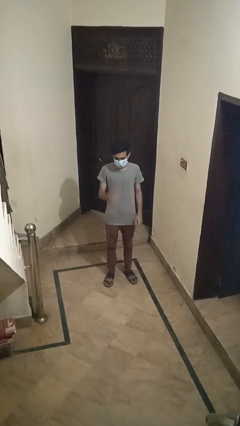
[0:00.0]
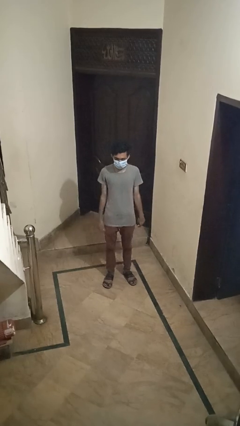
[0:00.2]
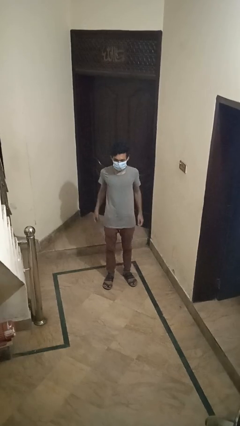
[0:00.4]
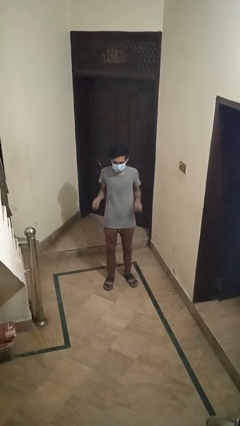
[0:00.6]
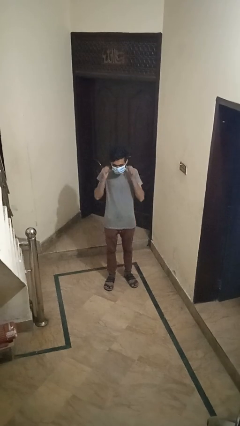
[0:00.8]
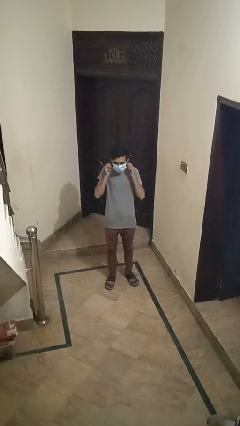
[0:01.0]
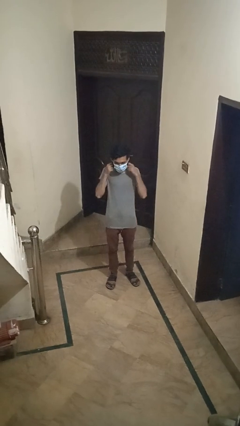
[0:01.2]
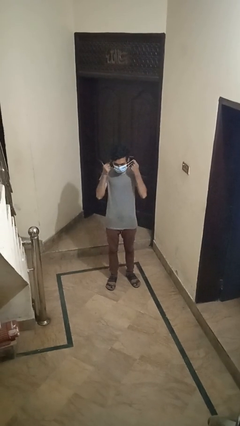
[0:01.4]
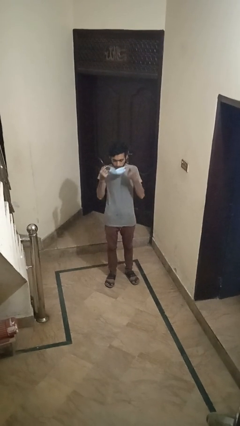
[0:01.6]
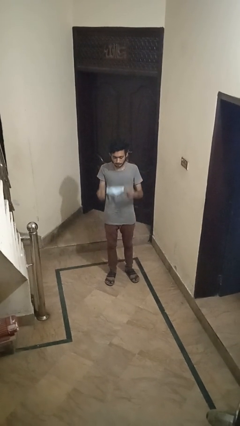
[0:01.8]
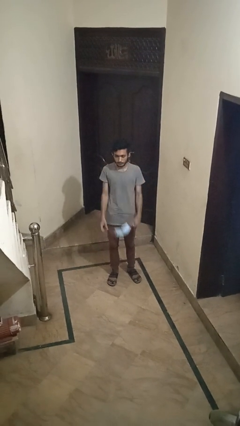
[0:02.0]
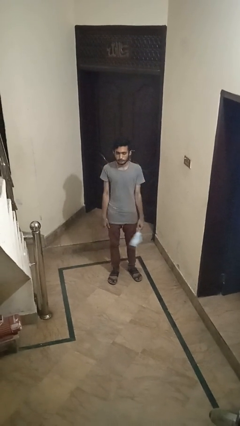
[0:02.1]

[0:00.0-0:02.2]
person takes off facemask

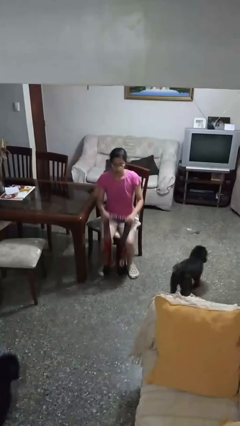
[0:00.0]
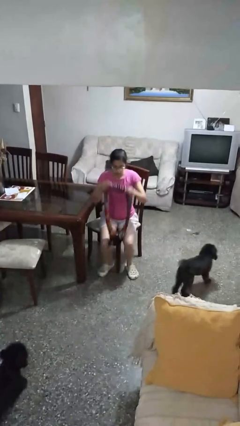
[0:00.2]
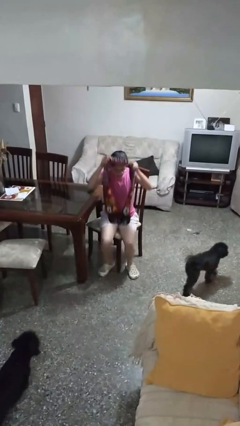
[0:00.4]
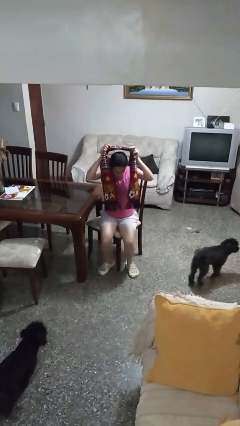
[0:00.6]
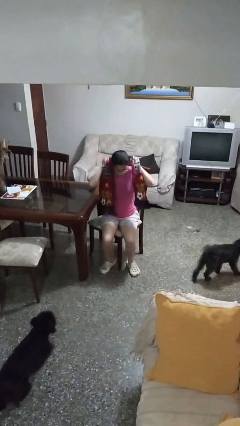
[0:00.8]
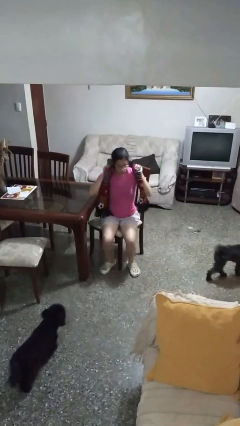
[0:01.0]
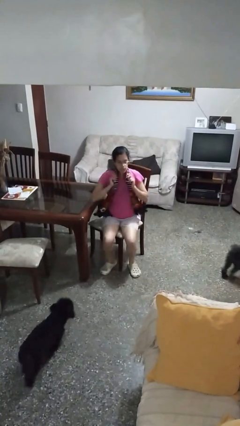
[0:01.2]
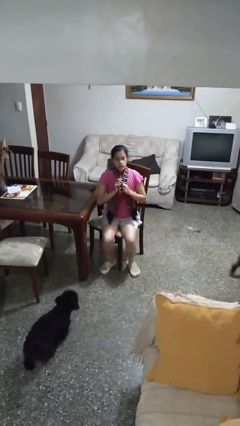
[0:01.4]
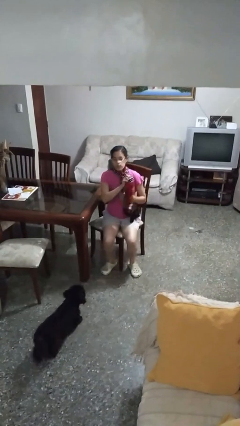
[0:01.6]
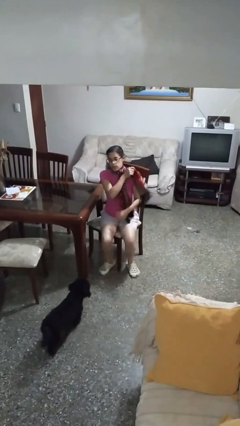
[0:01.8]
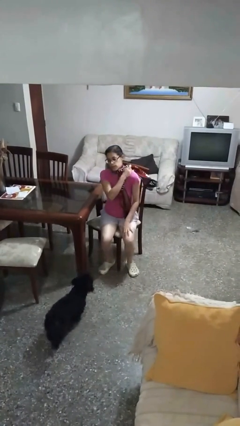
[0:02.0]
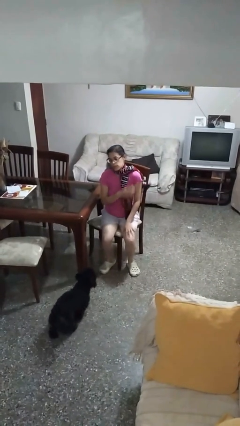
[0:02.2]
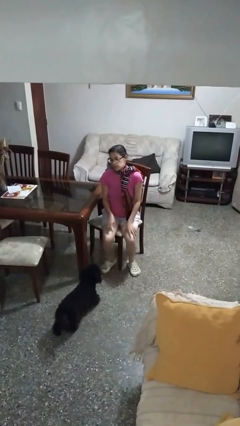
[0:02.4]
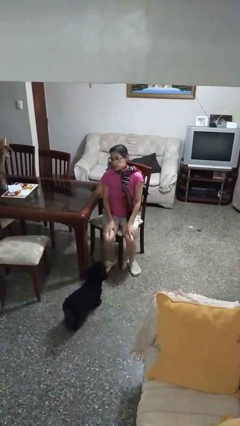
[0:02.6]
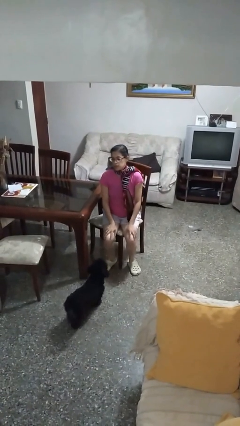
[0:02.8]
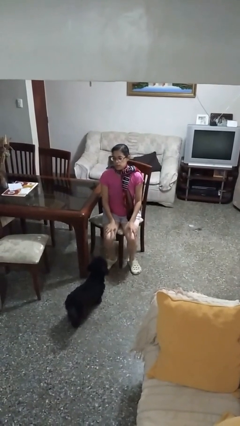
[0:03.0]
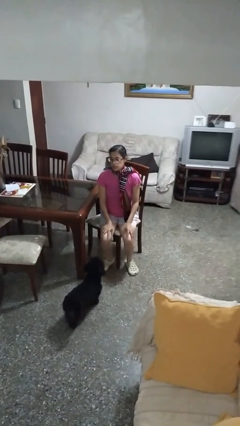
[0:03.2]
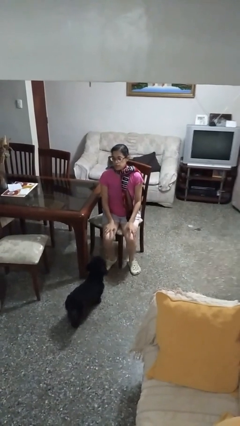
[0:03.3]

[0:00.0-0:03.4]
person puts on scarf

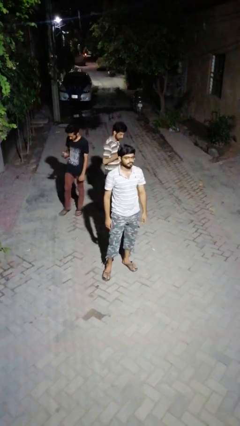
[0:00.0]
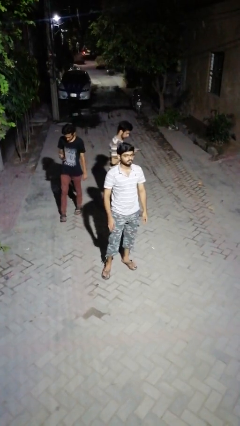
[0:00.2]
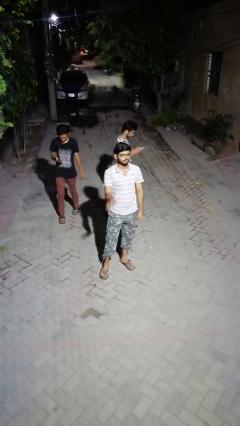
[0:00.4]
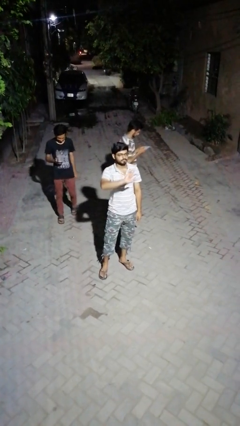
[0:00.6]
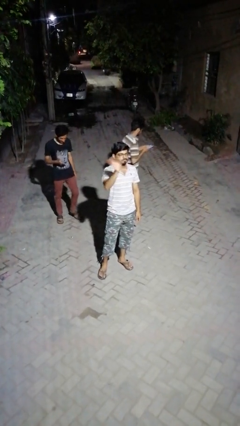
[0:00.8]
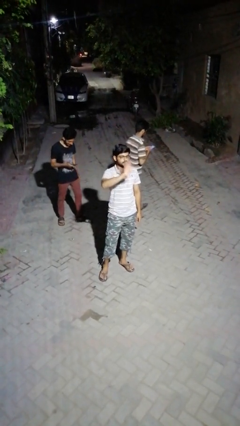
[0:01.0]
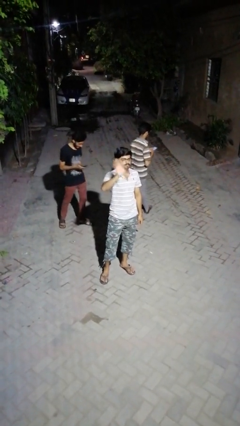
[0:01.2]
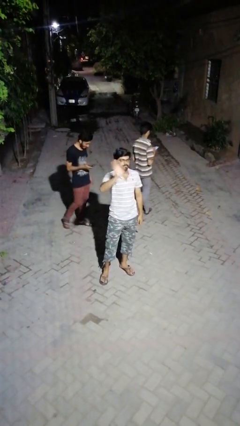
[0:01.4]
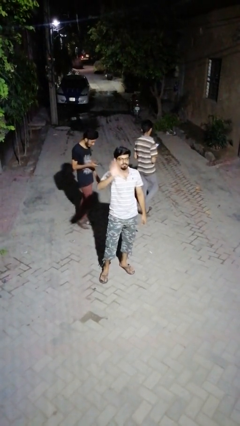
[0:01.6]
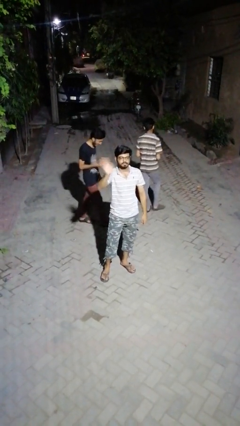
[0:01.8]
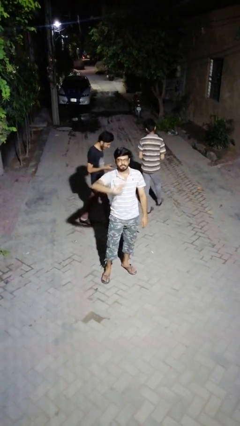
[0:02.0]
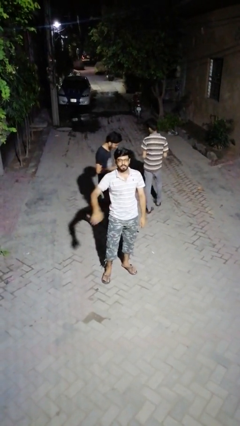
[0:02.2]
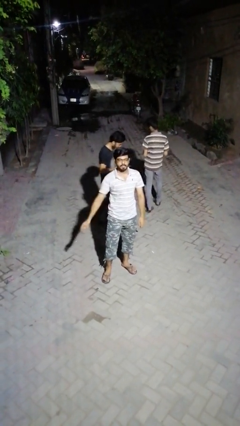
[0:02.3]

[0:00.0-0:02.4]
person waves at person

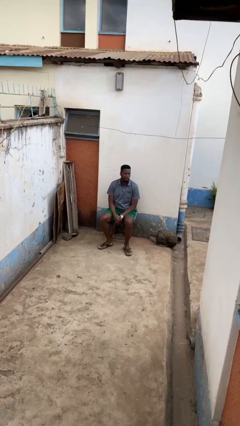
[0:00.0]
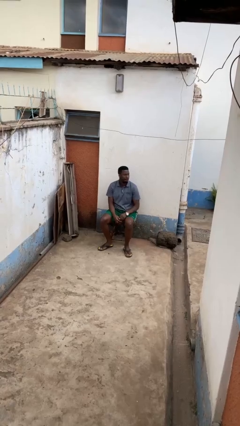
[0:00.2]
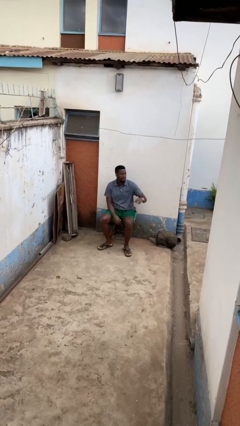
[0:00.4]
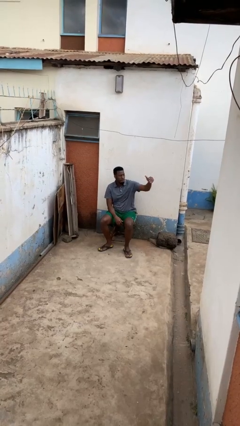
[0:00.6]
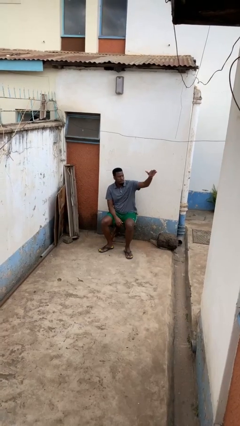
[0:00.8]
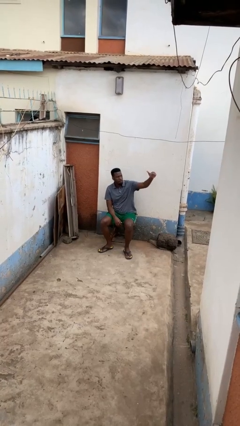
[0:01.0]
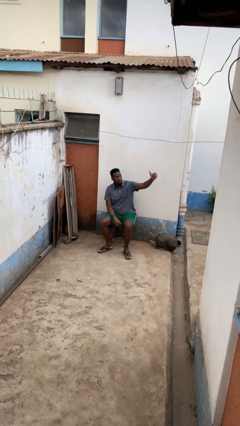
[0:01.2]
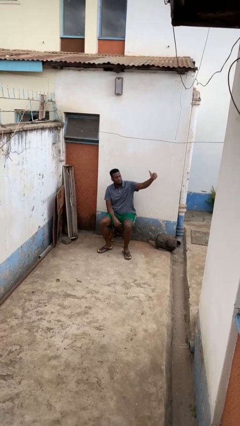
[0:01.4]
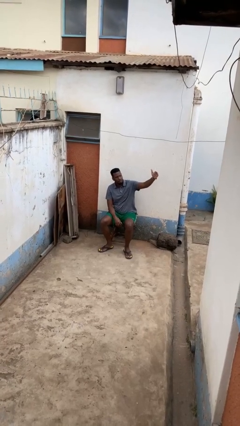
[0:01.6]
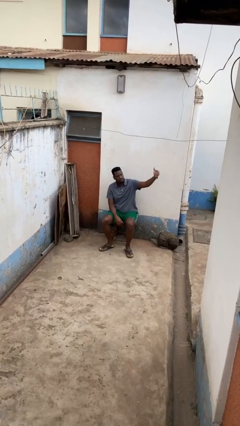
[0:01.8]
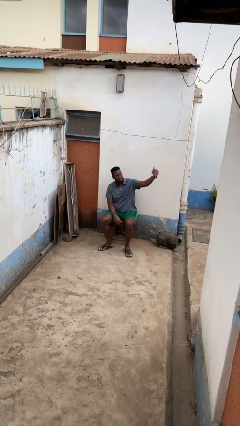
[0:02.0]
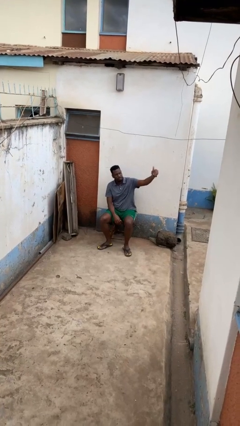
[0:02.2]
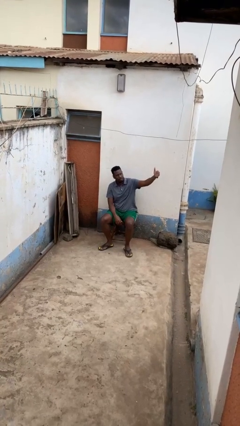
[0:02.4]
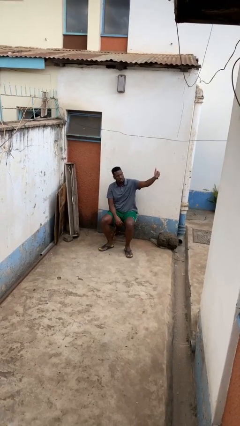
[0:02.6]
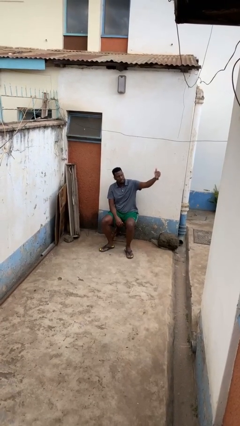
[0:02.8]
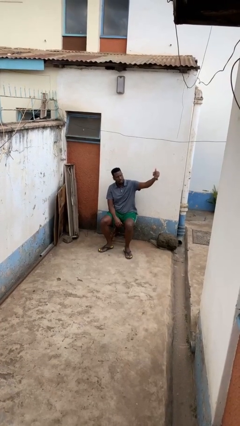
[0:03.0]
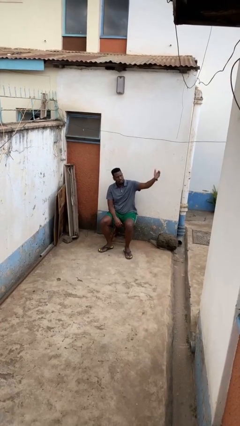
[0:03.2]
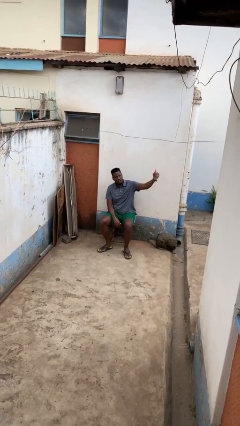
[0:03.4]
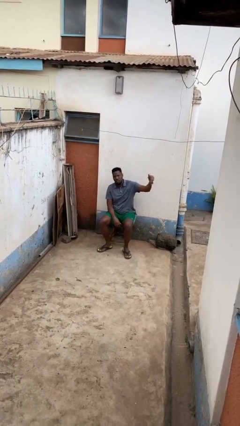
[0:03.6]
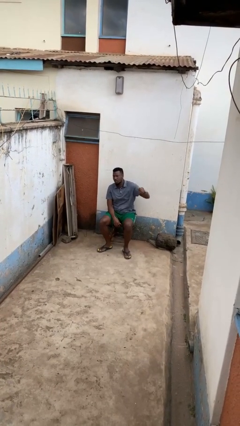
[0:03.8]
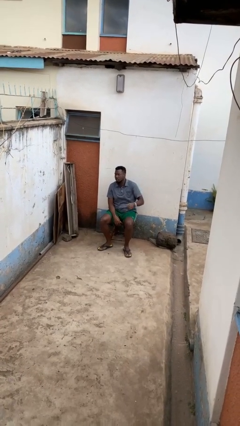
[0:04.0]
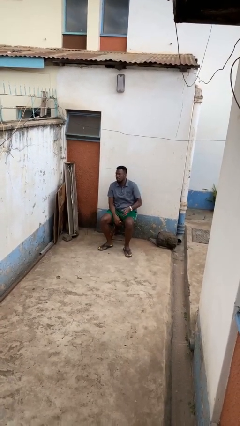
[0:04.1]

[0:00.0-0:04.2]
person gestures come here

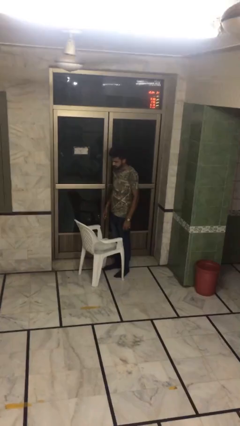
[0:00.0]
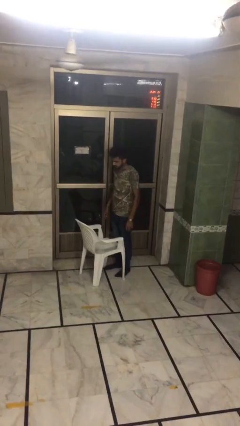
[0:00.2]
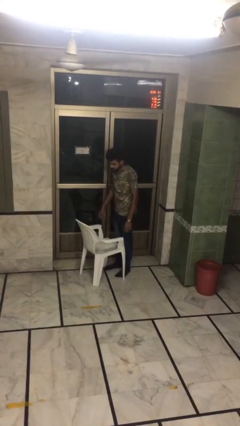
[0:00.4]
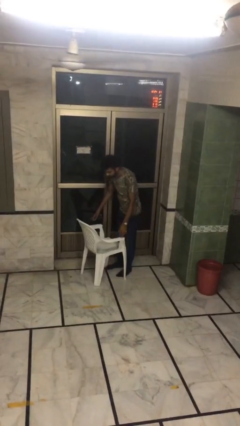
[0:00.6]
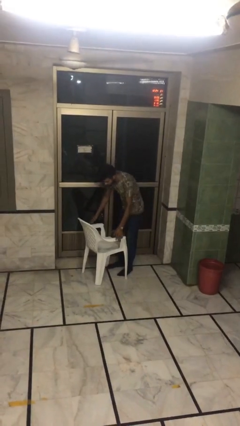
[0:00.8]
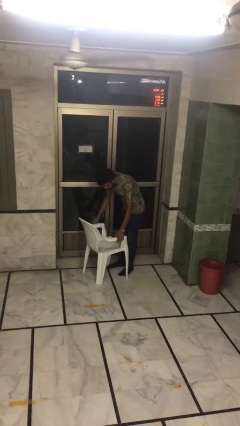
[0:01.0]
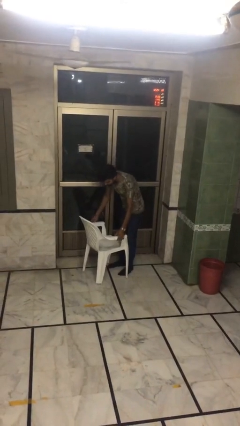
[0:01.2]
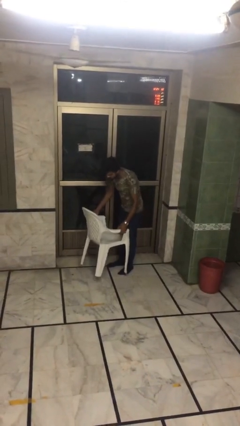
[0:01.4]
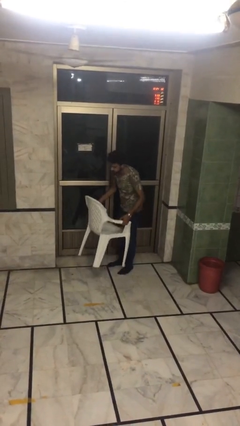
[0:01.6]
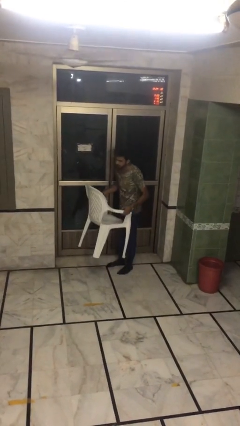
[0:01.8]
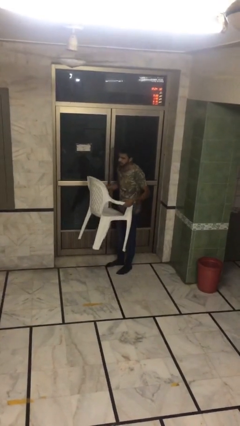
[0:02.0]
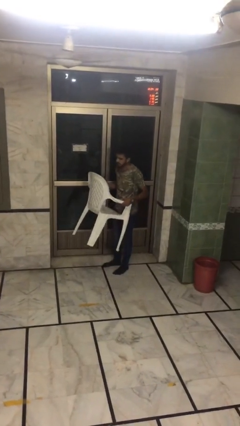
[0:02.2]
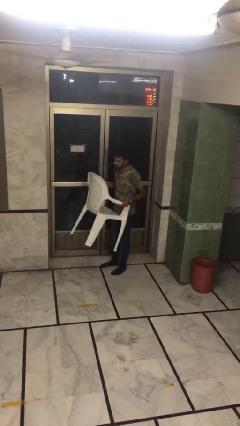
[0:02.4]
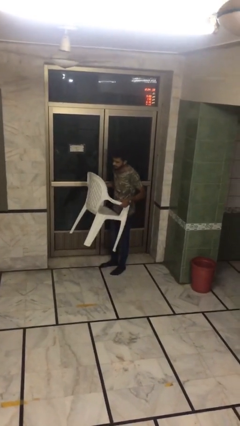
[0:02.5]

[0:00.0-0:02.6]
person picks up object from floor

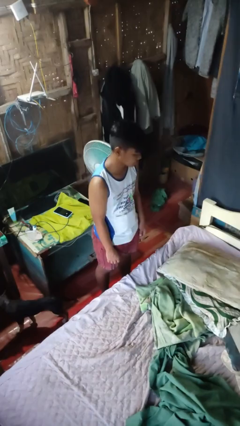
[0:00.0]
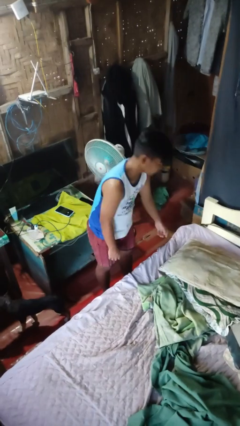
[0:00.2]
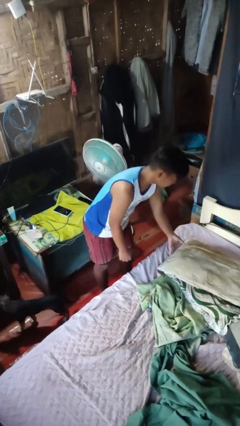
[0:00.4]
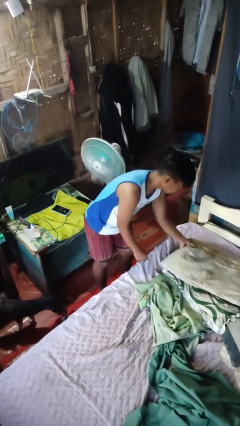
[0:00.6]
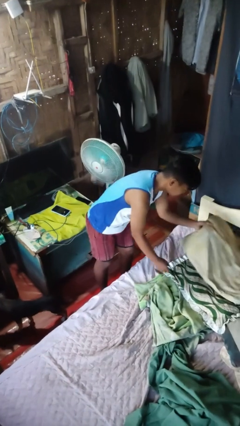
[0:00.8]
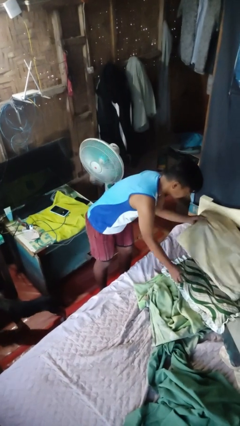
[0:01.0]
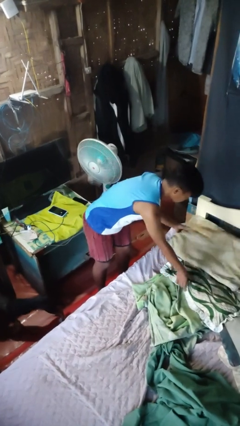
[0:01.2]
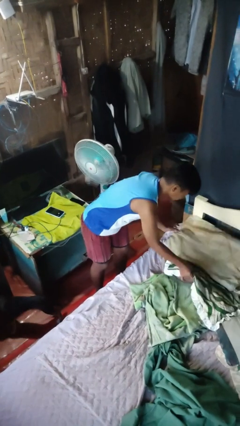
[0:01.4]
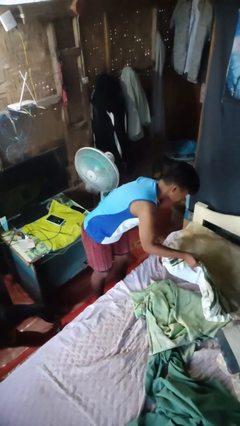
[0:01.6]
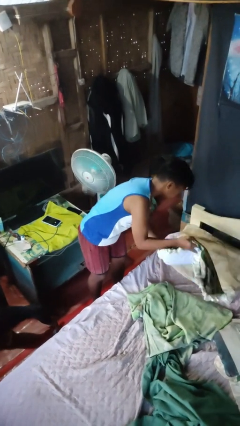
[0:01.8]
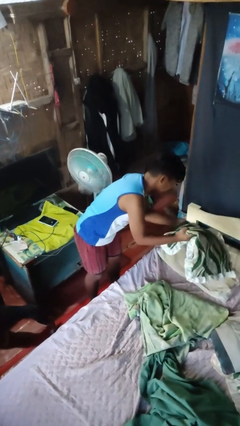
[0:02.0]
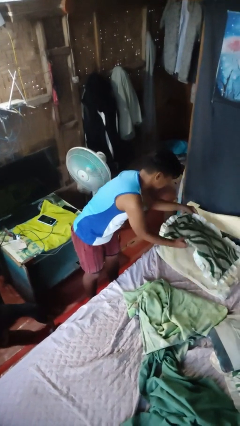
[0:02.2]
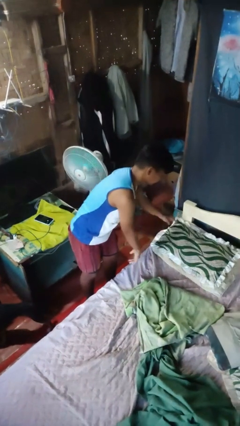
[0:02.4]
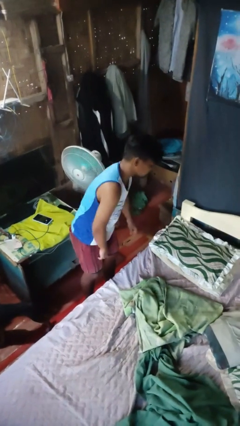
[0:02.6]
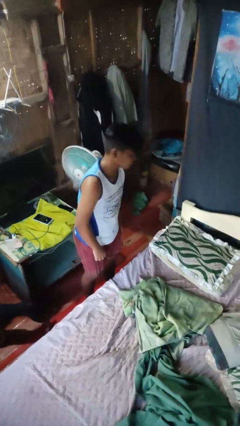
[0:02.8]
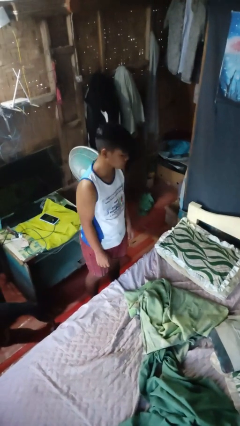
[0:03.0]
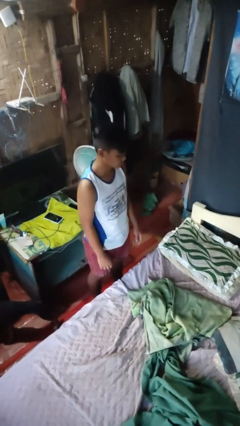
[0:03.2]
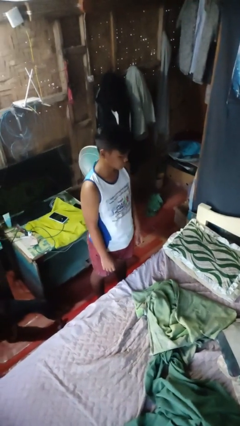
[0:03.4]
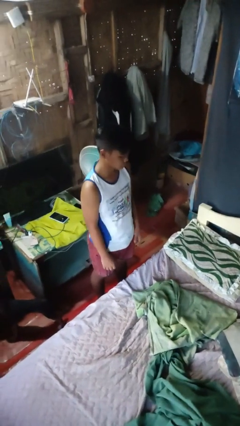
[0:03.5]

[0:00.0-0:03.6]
person makes bed
